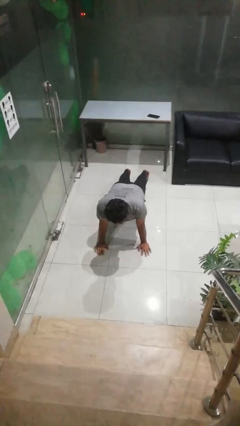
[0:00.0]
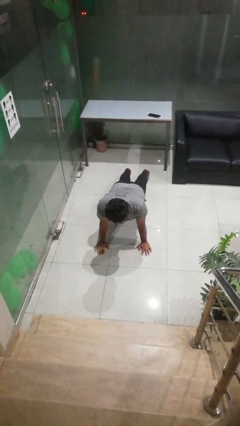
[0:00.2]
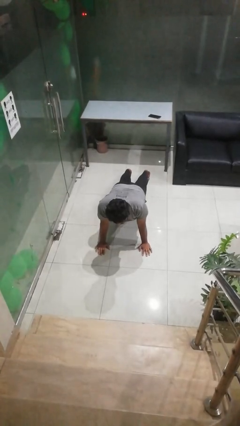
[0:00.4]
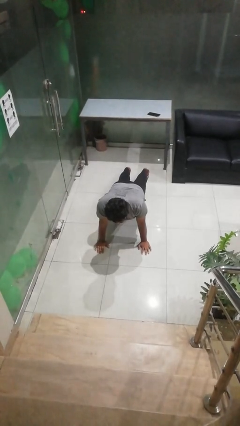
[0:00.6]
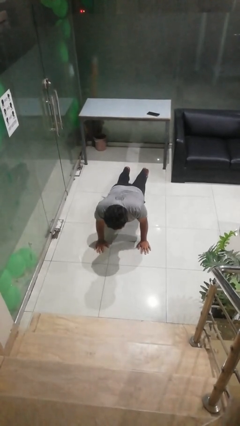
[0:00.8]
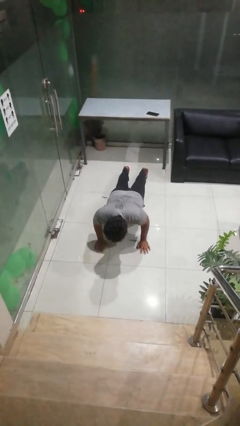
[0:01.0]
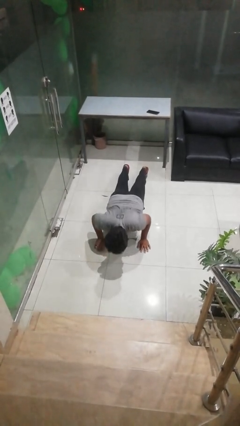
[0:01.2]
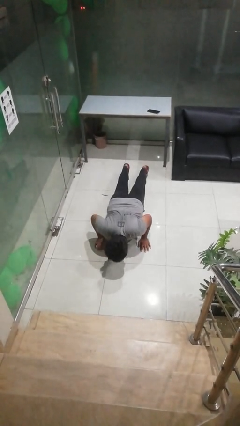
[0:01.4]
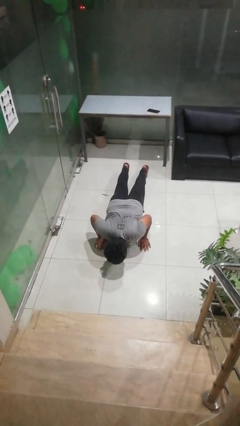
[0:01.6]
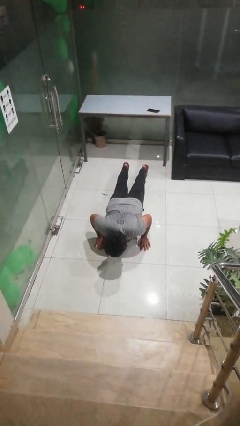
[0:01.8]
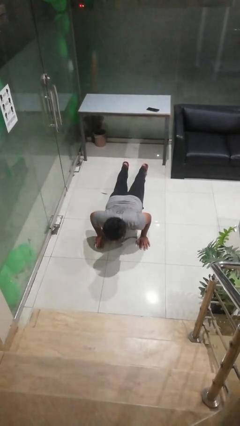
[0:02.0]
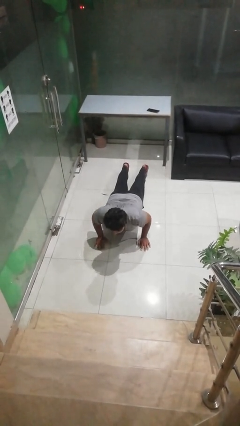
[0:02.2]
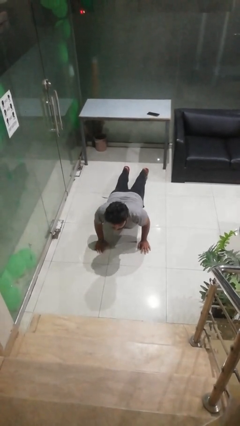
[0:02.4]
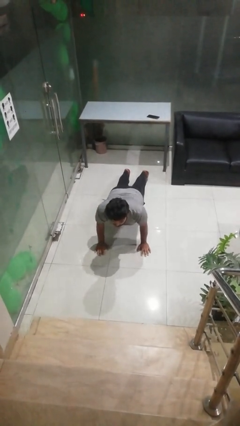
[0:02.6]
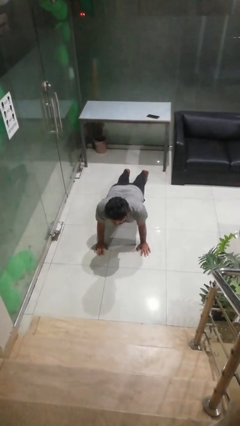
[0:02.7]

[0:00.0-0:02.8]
person exercises with pushup

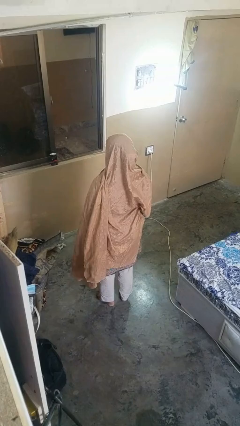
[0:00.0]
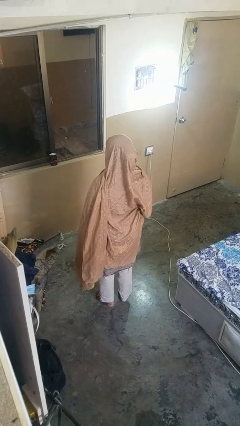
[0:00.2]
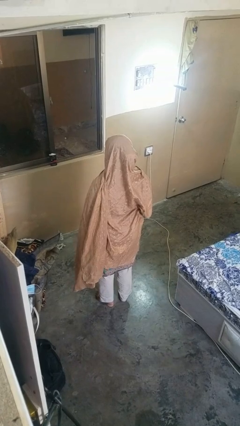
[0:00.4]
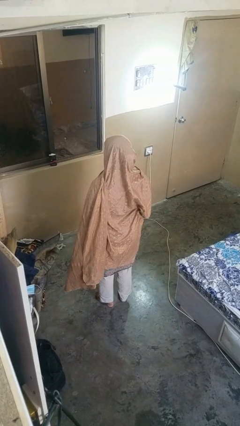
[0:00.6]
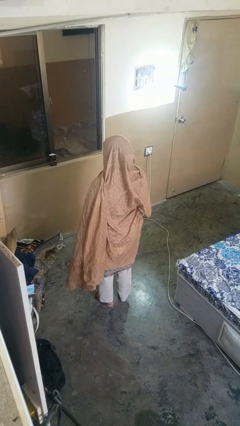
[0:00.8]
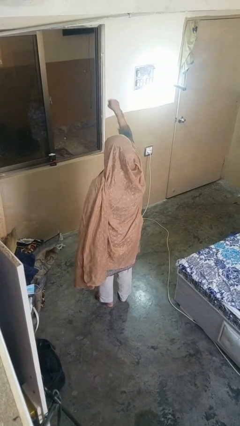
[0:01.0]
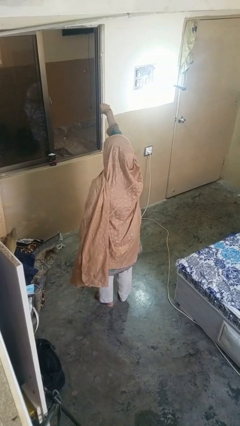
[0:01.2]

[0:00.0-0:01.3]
person punches

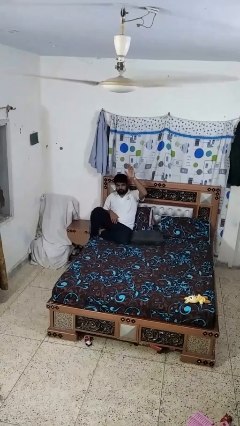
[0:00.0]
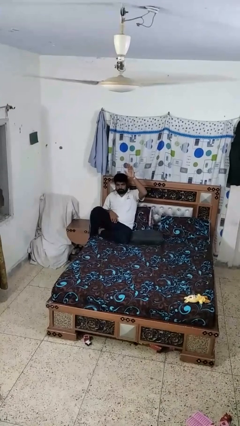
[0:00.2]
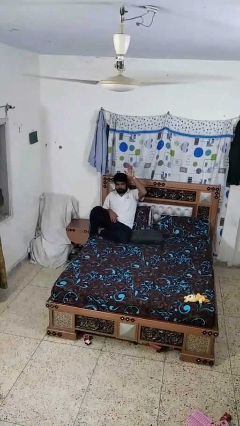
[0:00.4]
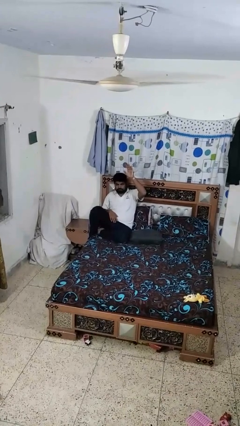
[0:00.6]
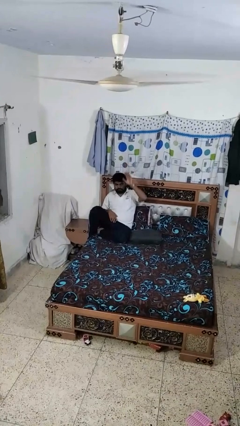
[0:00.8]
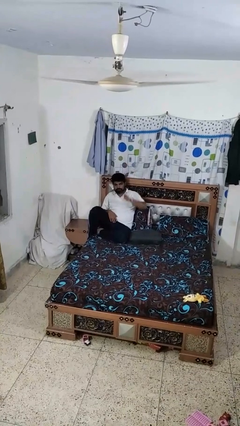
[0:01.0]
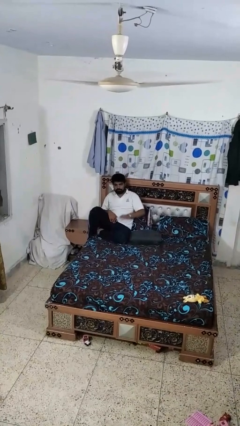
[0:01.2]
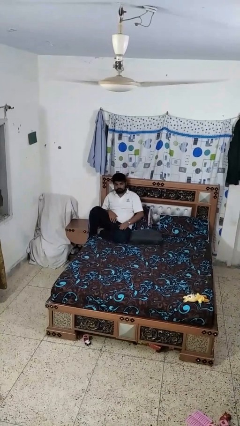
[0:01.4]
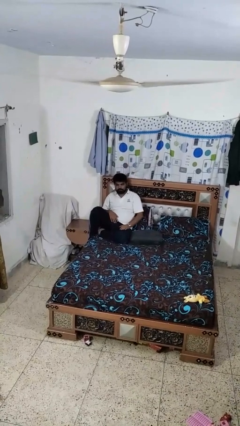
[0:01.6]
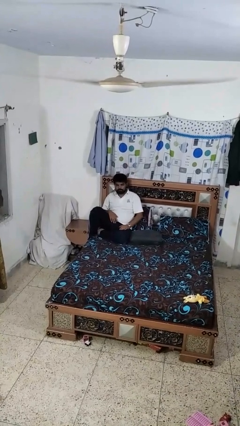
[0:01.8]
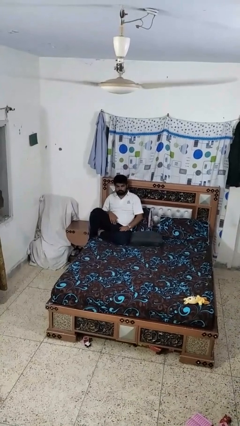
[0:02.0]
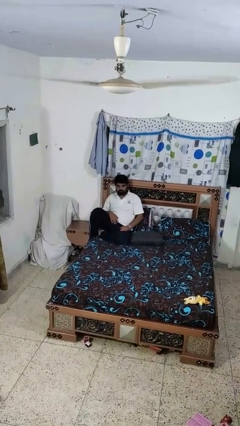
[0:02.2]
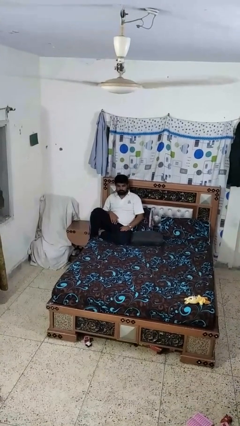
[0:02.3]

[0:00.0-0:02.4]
person gestures lower hand

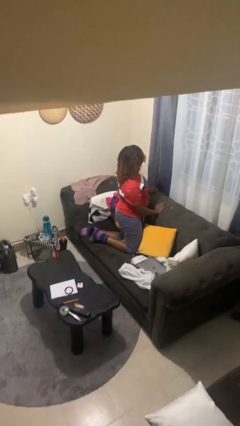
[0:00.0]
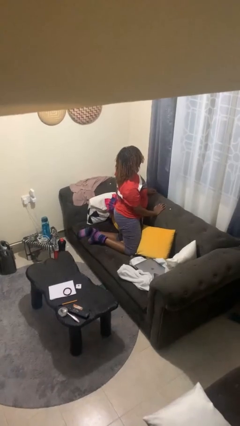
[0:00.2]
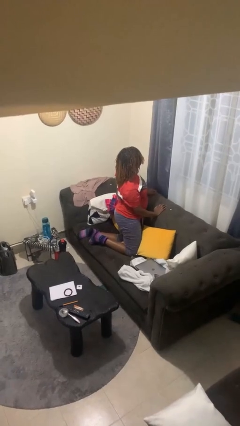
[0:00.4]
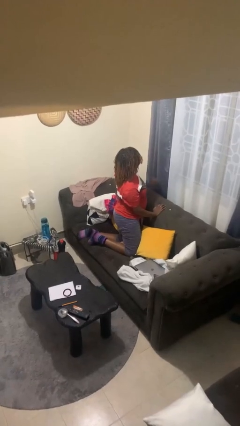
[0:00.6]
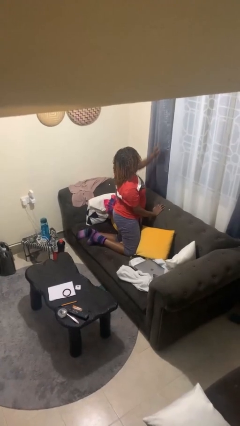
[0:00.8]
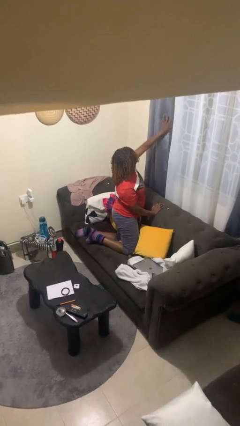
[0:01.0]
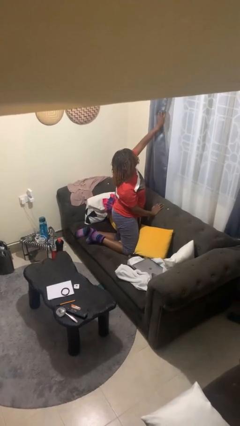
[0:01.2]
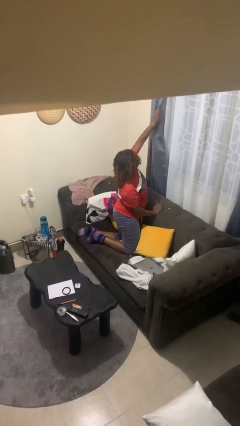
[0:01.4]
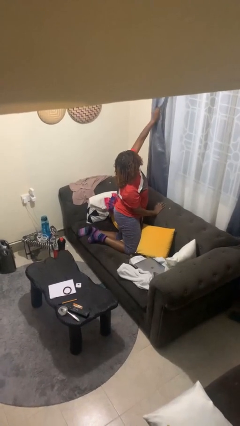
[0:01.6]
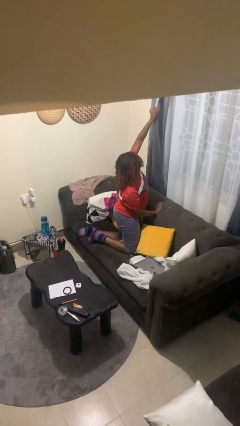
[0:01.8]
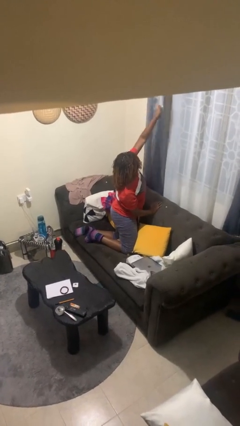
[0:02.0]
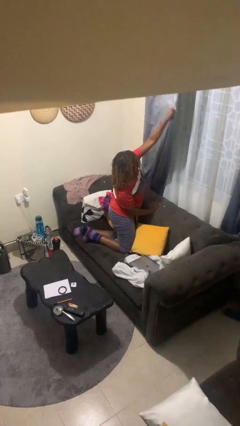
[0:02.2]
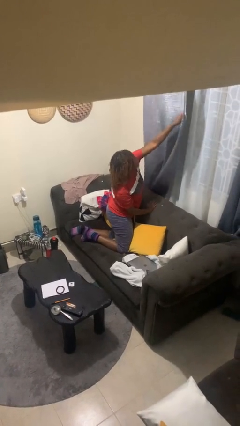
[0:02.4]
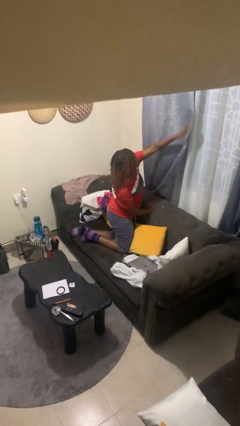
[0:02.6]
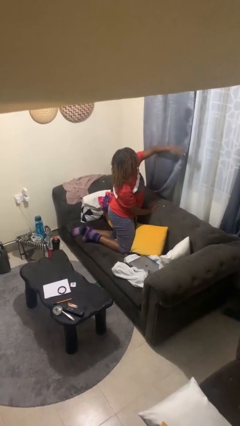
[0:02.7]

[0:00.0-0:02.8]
person closes curtains

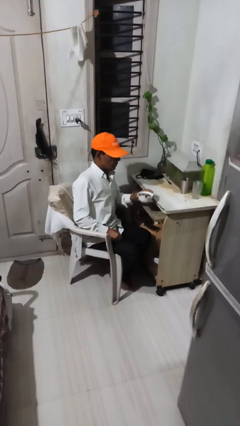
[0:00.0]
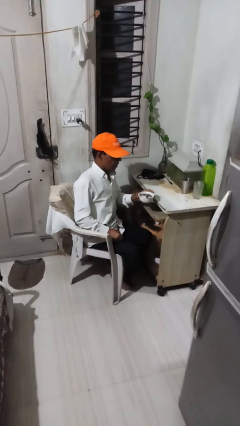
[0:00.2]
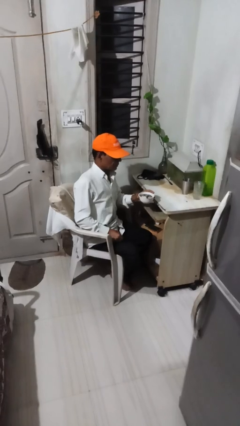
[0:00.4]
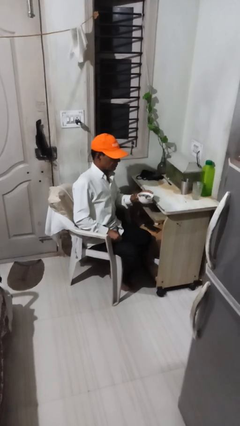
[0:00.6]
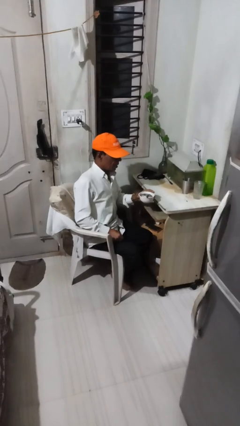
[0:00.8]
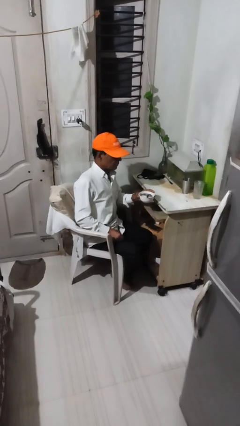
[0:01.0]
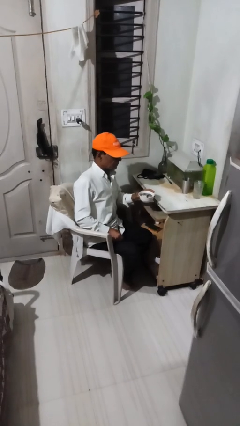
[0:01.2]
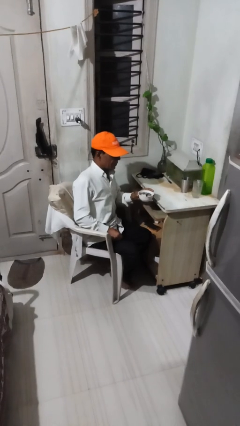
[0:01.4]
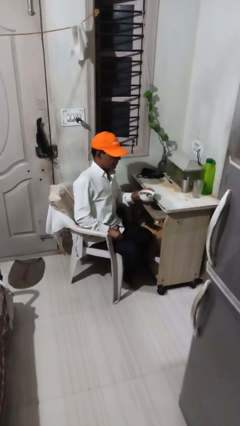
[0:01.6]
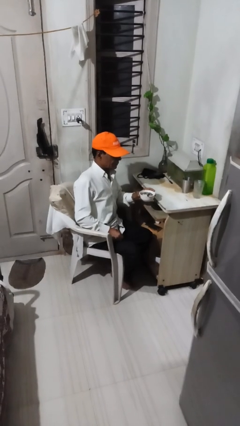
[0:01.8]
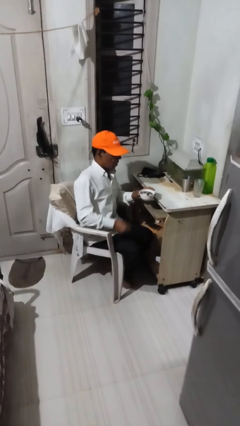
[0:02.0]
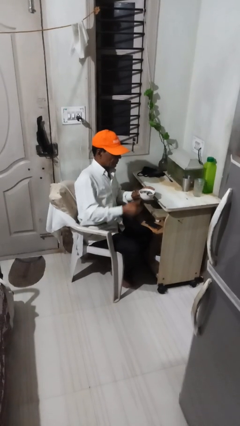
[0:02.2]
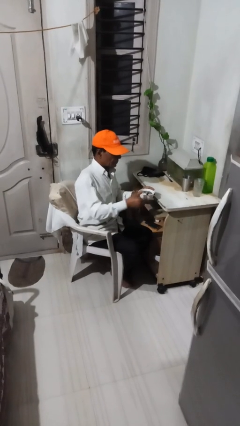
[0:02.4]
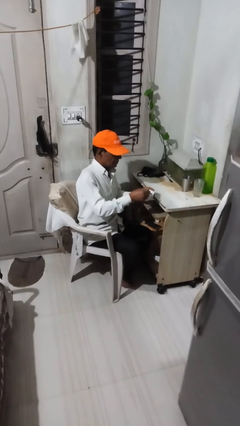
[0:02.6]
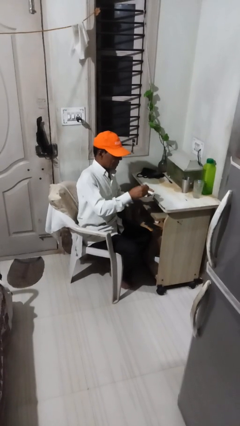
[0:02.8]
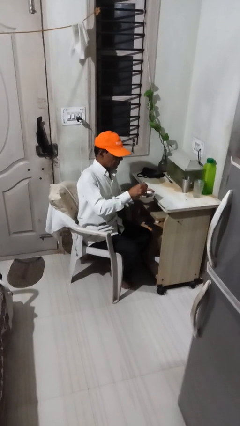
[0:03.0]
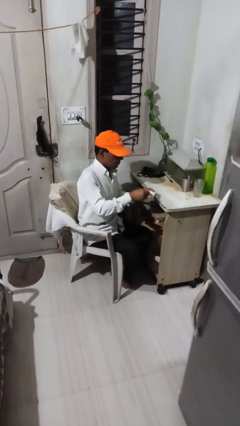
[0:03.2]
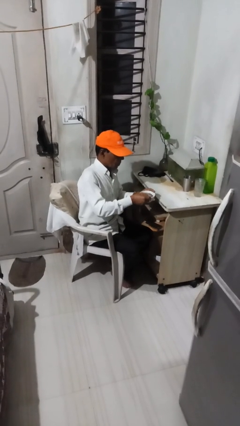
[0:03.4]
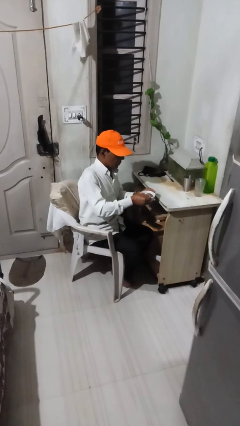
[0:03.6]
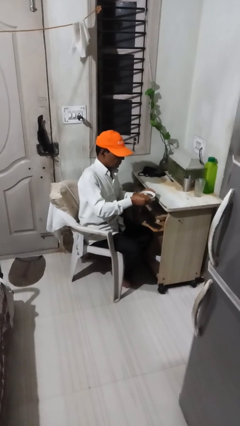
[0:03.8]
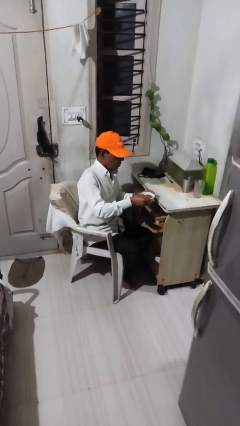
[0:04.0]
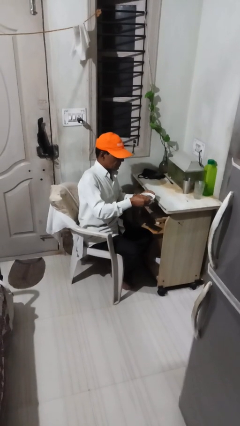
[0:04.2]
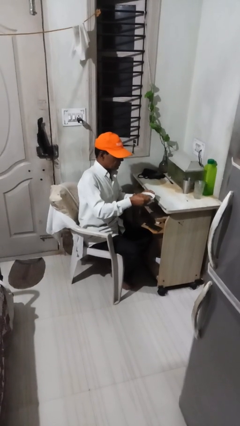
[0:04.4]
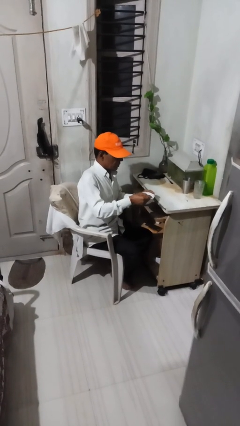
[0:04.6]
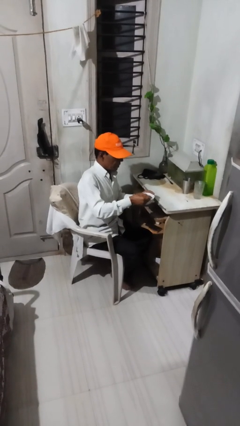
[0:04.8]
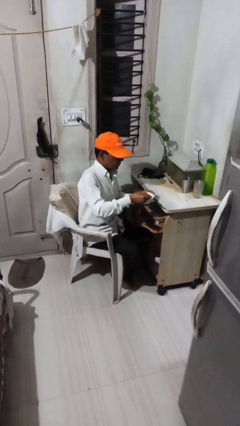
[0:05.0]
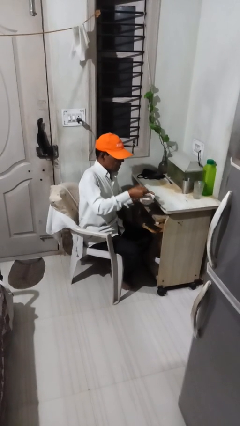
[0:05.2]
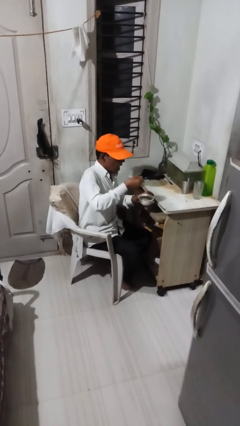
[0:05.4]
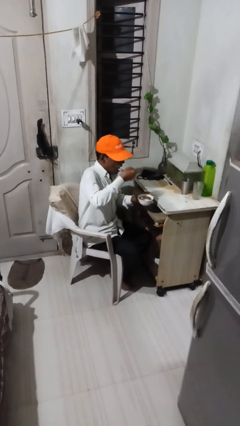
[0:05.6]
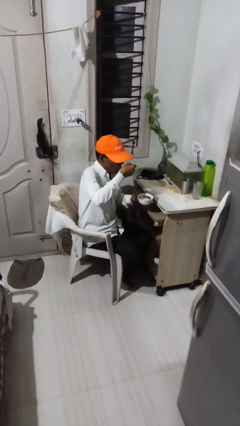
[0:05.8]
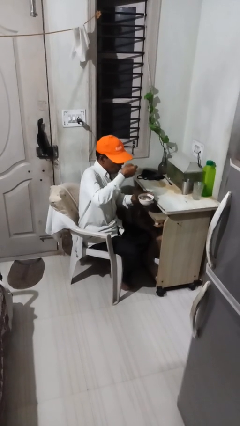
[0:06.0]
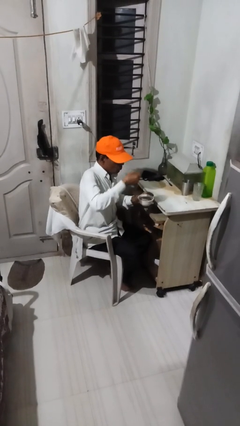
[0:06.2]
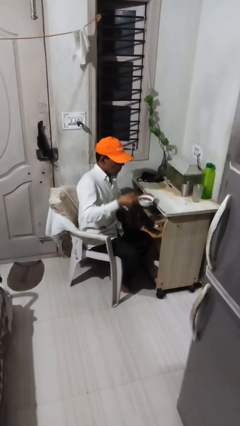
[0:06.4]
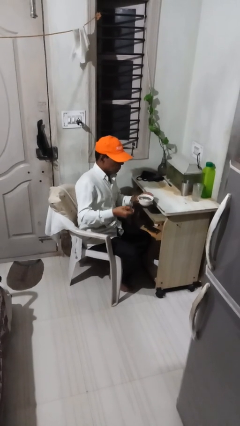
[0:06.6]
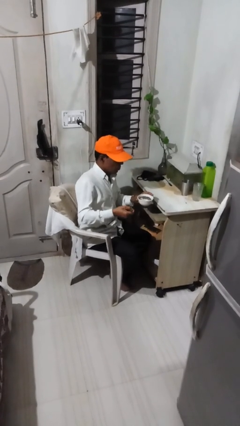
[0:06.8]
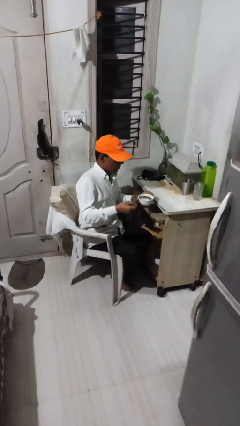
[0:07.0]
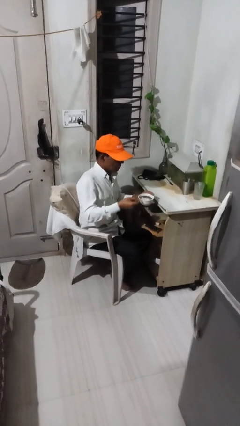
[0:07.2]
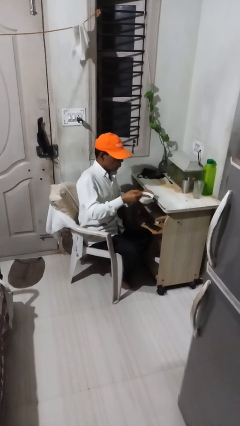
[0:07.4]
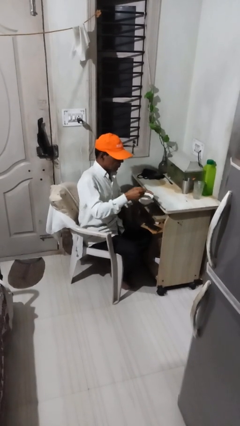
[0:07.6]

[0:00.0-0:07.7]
person eats with utensil

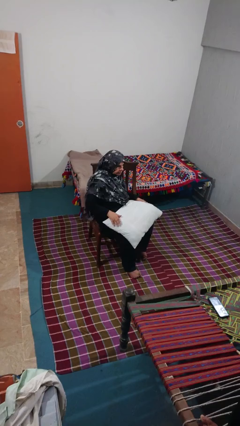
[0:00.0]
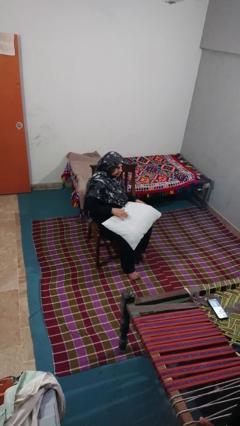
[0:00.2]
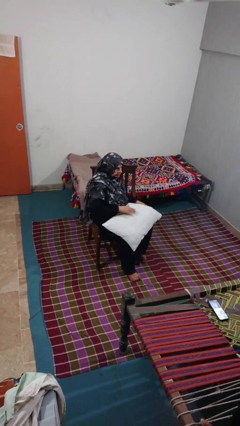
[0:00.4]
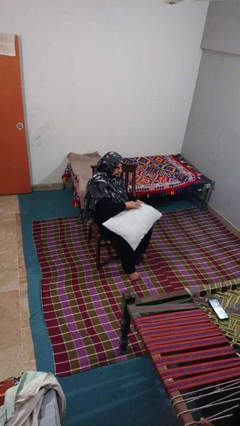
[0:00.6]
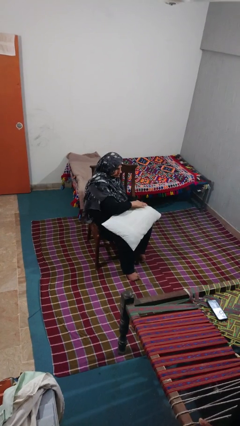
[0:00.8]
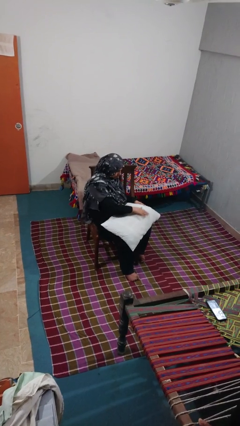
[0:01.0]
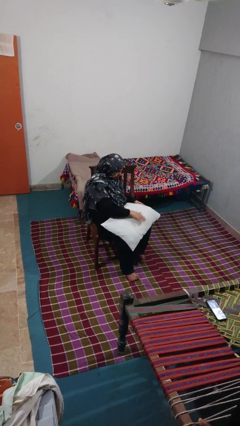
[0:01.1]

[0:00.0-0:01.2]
person waves hand over object
